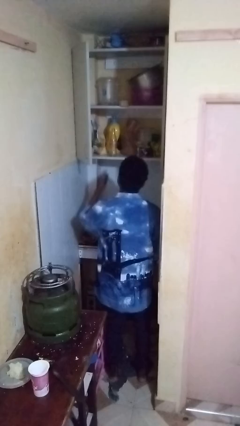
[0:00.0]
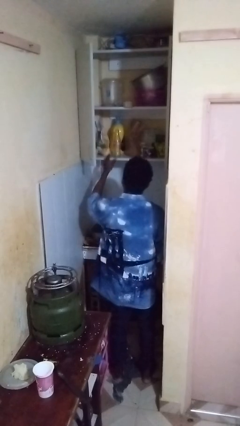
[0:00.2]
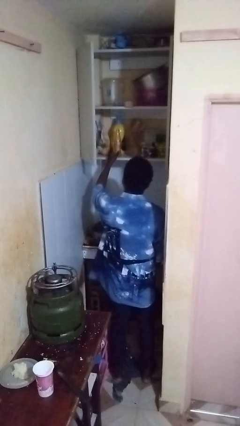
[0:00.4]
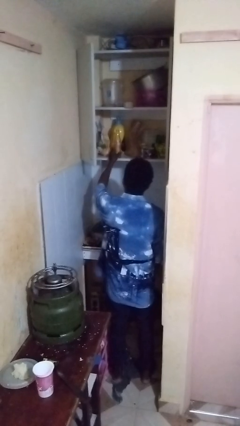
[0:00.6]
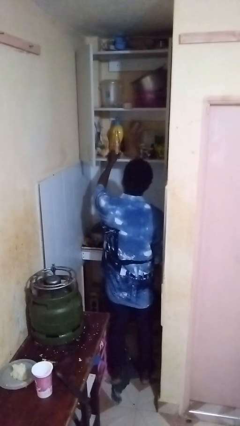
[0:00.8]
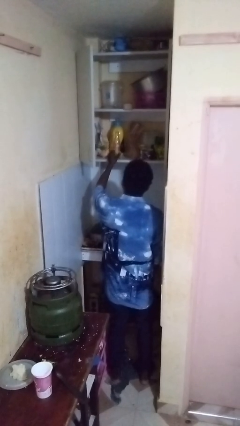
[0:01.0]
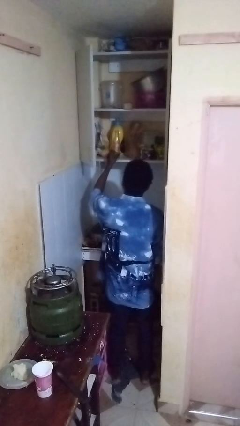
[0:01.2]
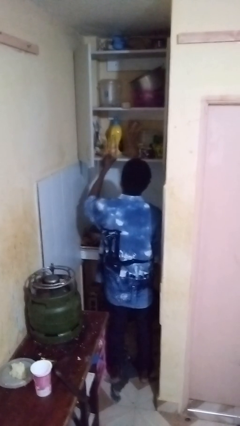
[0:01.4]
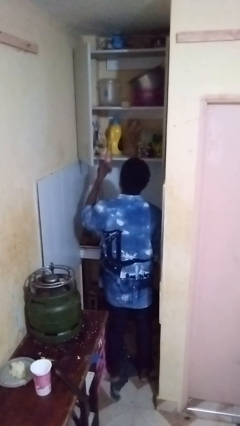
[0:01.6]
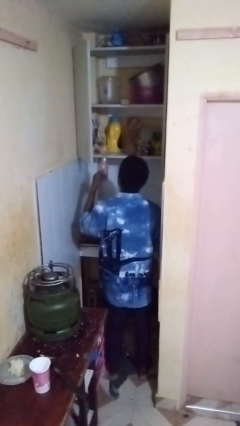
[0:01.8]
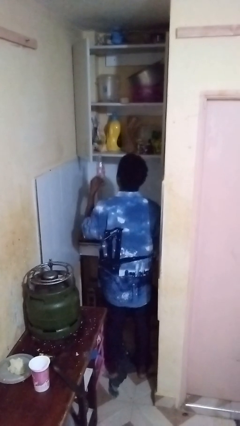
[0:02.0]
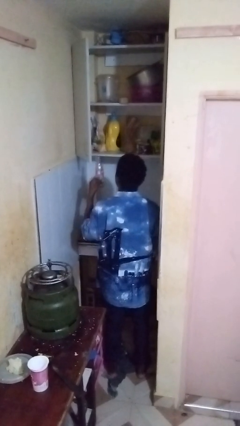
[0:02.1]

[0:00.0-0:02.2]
person picks up object from cabinet

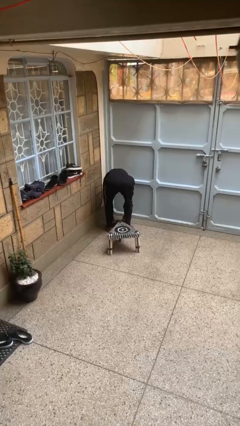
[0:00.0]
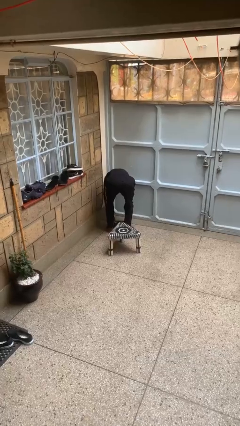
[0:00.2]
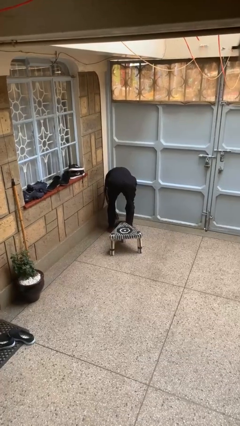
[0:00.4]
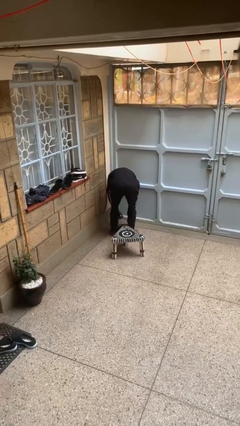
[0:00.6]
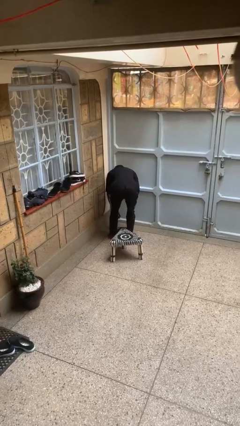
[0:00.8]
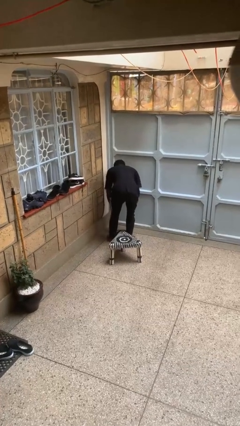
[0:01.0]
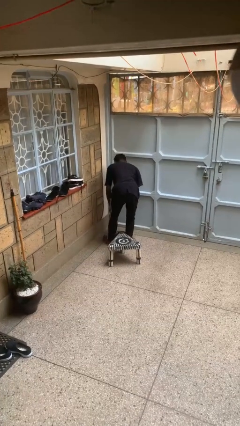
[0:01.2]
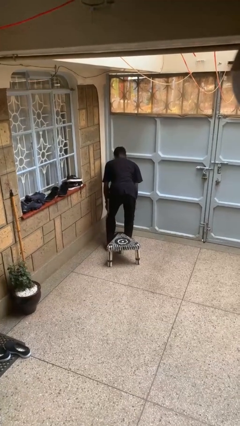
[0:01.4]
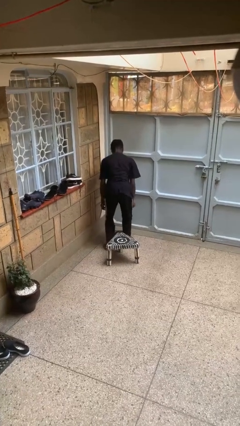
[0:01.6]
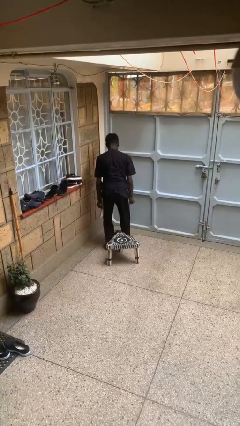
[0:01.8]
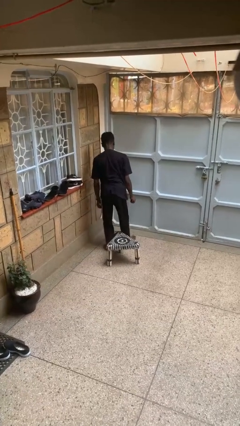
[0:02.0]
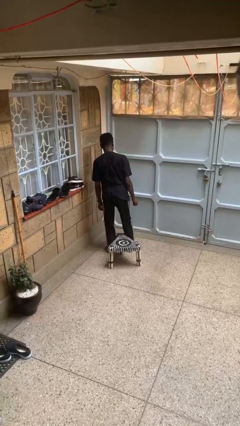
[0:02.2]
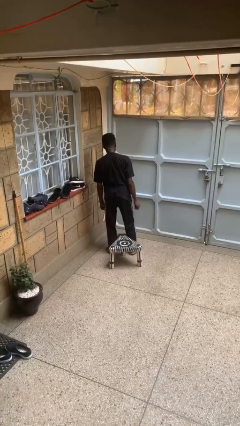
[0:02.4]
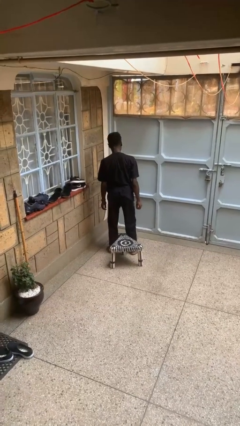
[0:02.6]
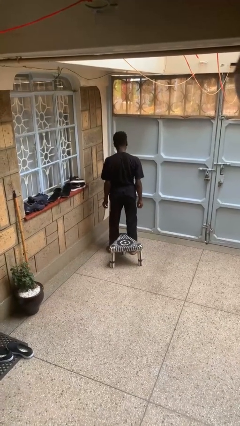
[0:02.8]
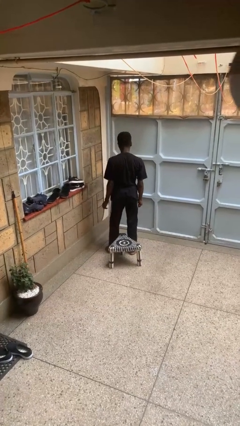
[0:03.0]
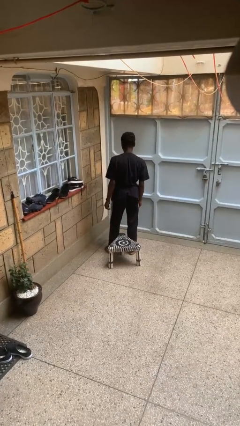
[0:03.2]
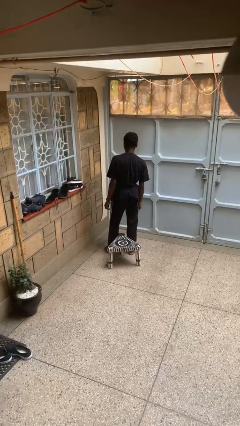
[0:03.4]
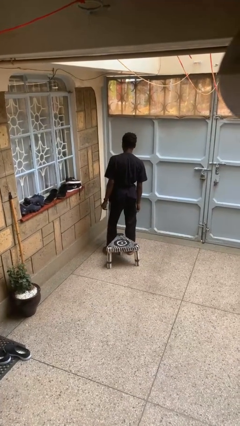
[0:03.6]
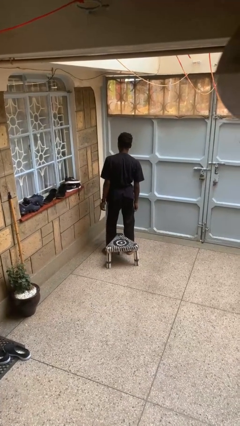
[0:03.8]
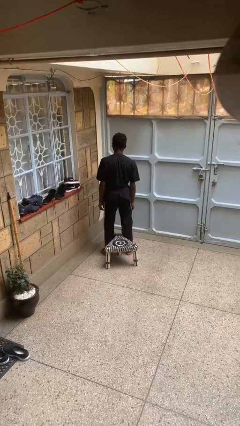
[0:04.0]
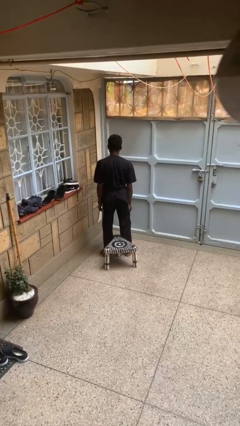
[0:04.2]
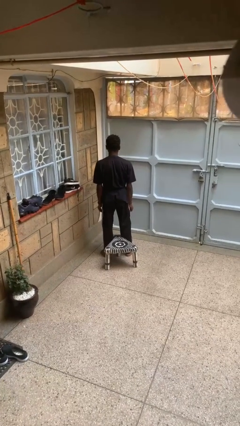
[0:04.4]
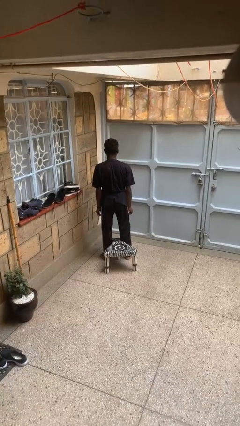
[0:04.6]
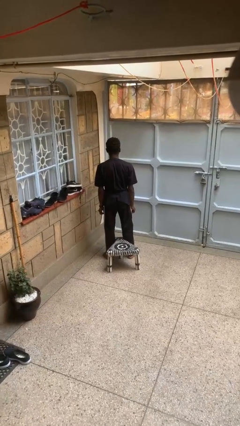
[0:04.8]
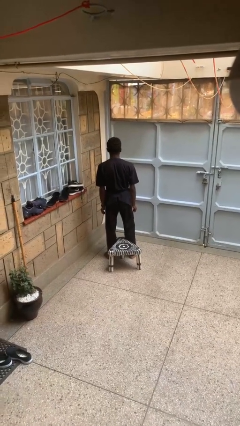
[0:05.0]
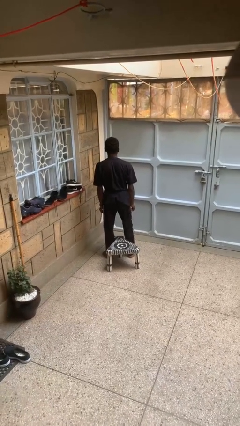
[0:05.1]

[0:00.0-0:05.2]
person stands up from floor

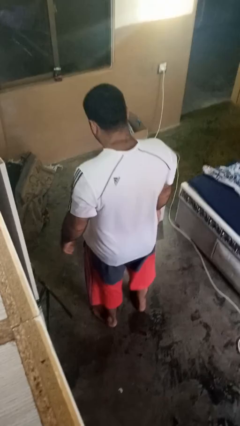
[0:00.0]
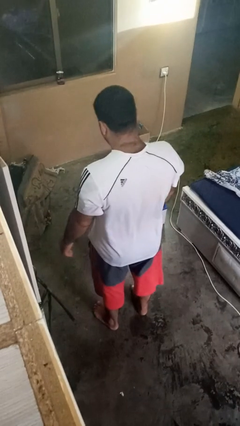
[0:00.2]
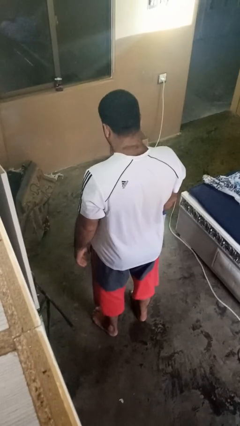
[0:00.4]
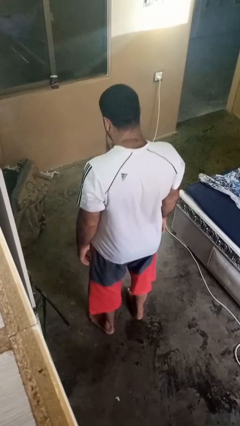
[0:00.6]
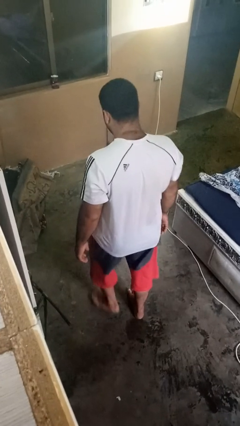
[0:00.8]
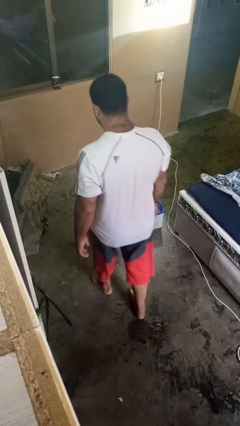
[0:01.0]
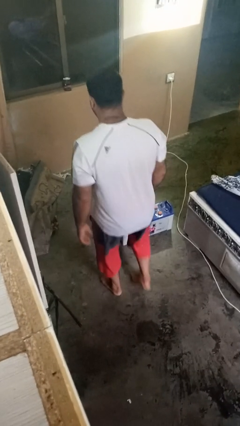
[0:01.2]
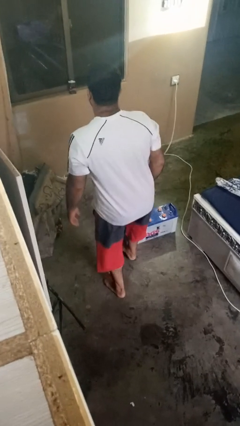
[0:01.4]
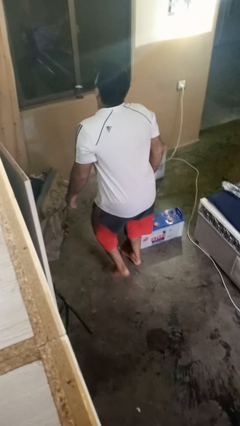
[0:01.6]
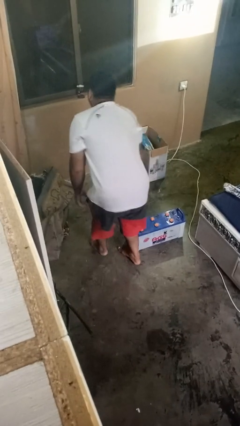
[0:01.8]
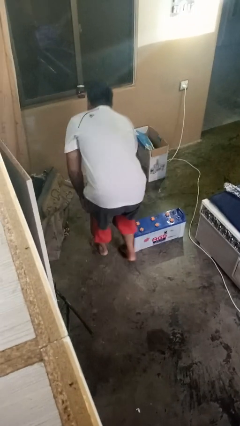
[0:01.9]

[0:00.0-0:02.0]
person trips on object on floor

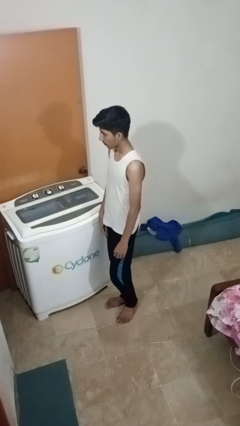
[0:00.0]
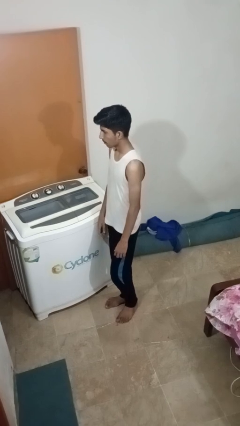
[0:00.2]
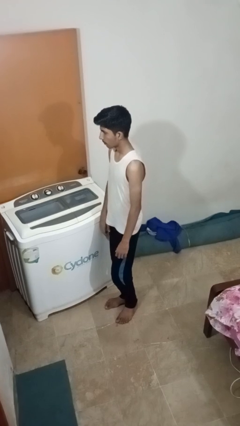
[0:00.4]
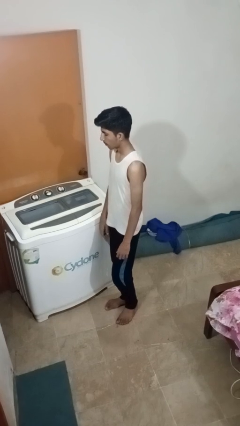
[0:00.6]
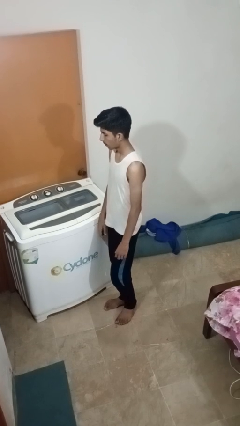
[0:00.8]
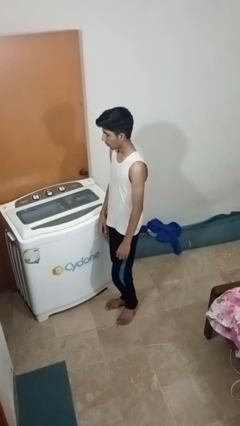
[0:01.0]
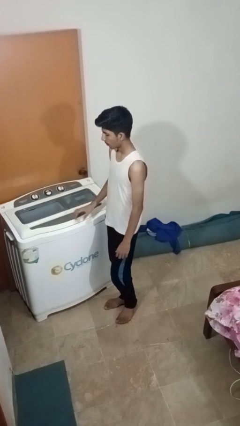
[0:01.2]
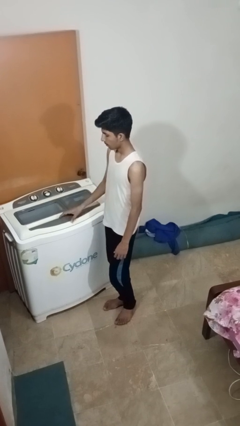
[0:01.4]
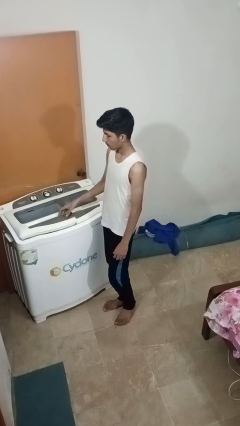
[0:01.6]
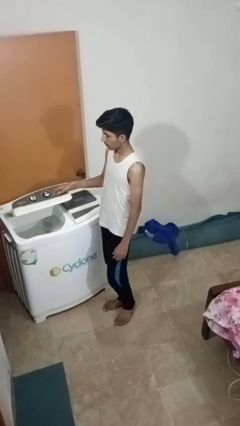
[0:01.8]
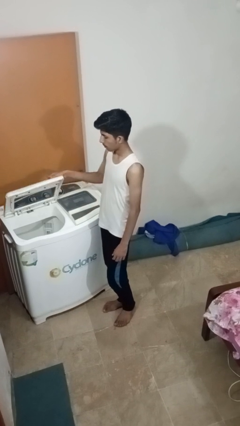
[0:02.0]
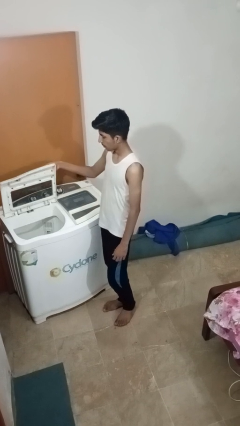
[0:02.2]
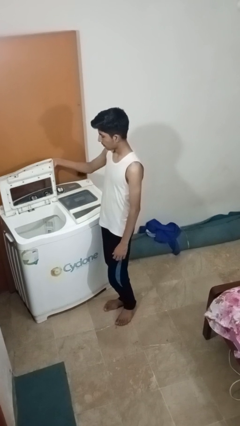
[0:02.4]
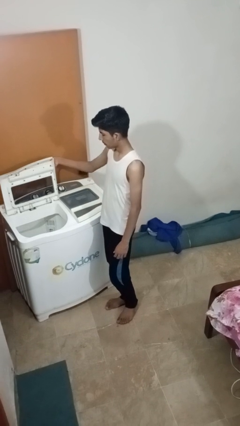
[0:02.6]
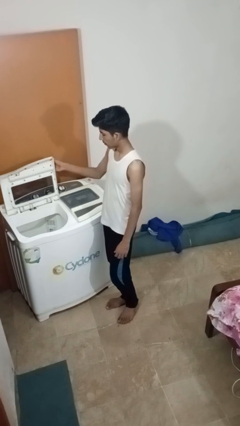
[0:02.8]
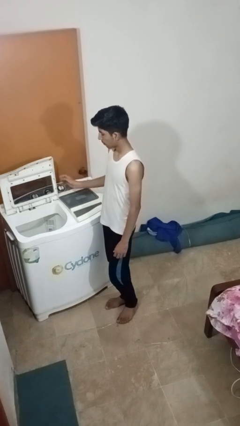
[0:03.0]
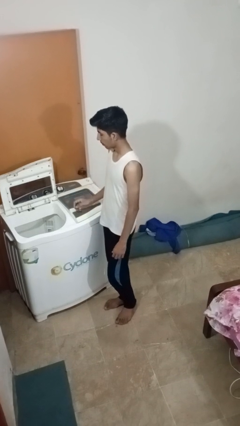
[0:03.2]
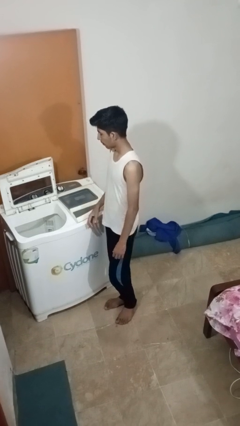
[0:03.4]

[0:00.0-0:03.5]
person opens clothes washer

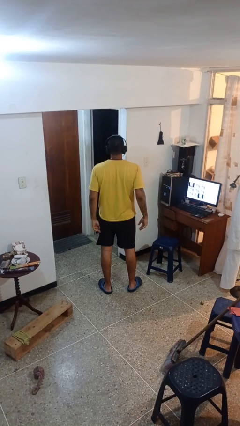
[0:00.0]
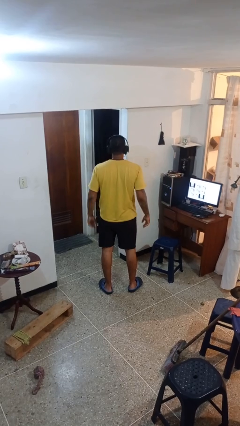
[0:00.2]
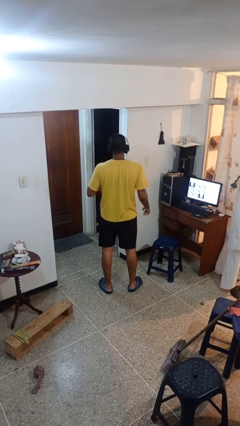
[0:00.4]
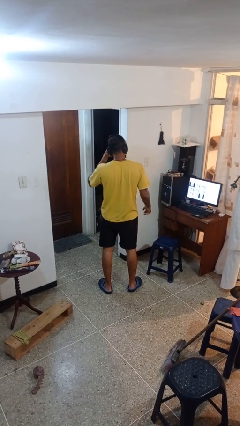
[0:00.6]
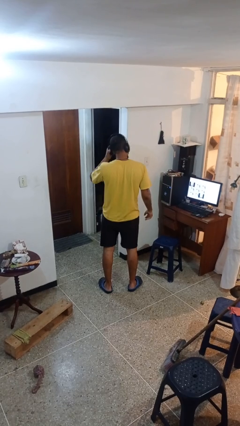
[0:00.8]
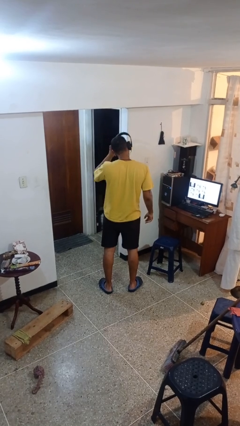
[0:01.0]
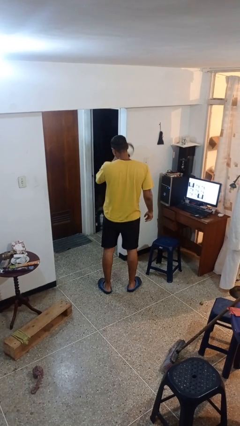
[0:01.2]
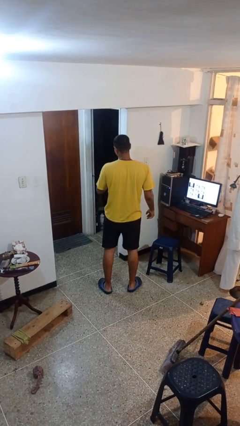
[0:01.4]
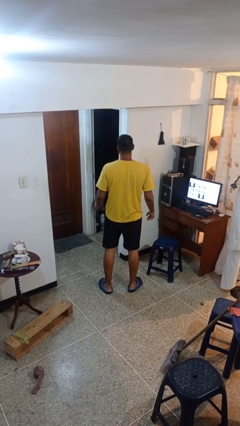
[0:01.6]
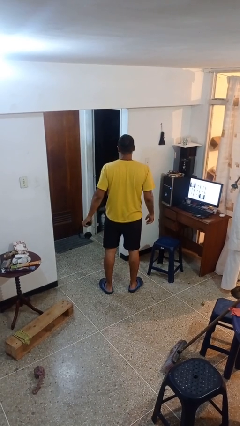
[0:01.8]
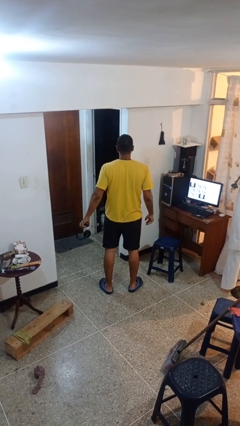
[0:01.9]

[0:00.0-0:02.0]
person takes off headphones

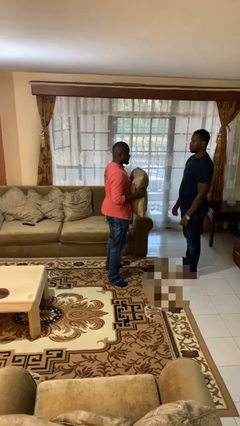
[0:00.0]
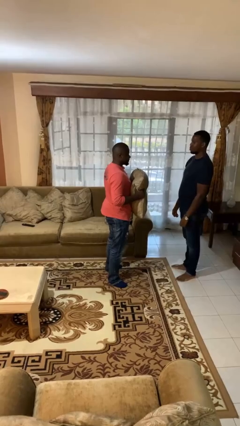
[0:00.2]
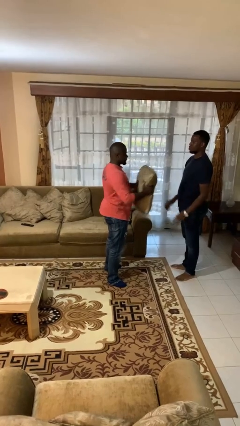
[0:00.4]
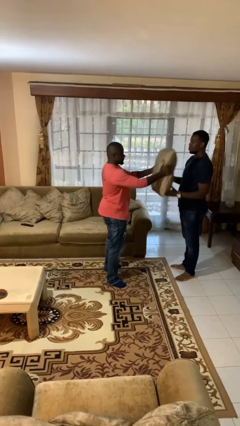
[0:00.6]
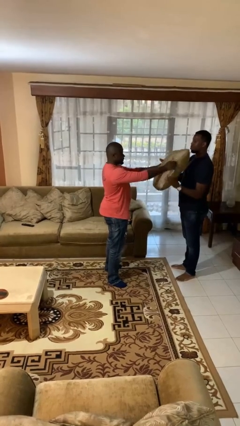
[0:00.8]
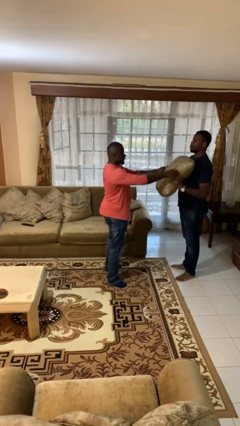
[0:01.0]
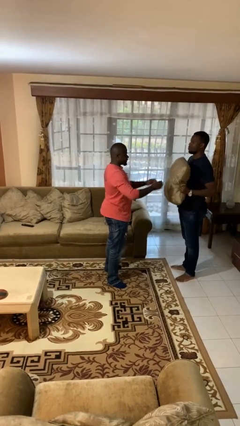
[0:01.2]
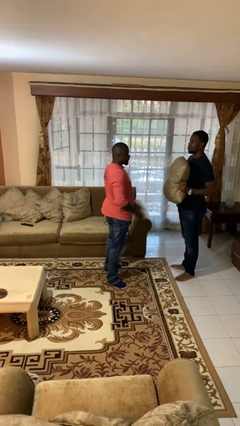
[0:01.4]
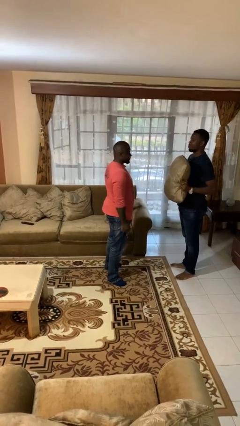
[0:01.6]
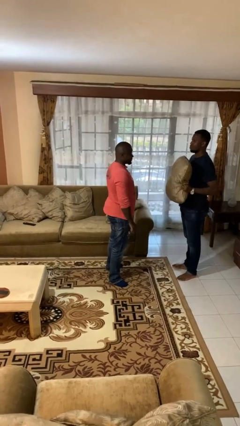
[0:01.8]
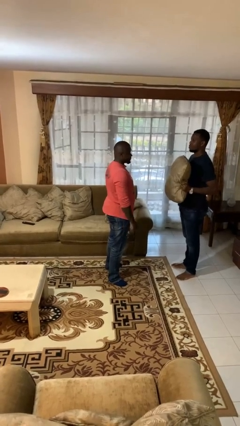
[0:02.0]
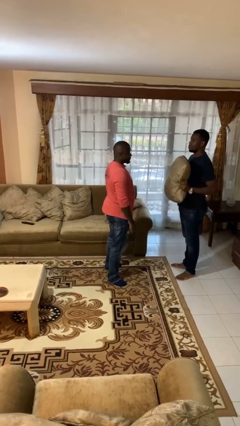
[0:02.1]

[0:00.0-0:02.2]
person transfers object to person

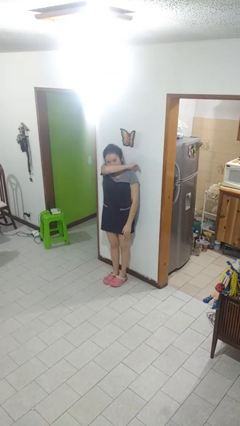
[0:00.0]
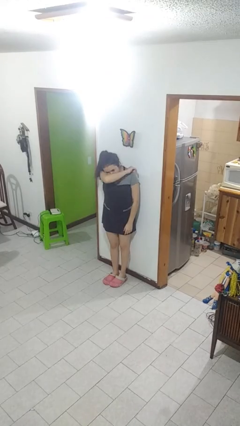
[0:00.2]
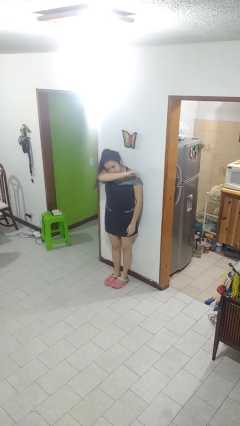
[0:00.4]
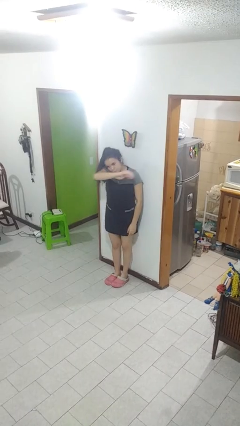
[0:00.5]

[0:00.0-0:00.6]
person sneezes into arm
